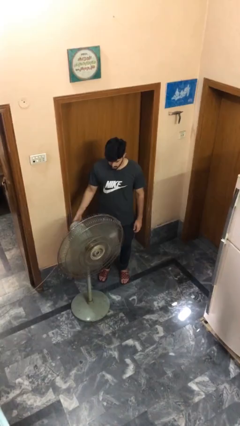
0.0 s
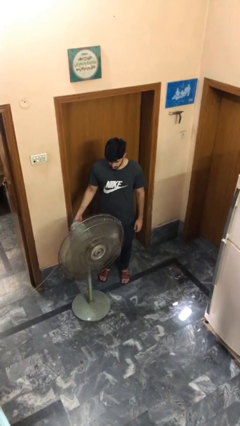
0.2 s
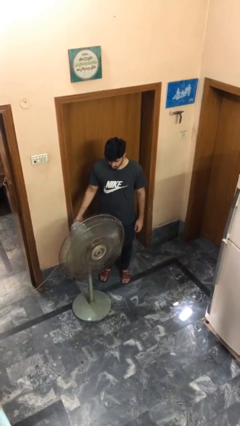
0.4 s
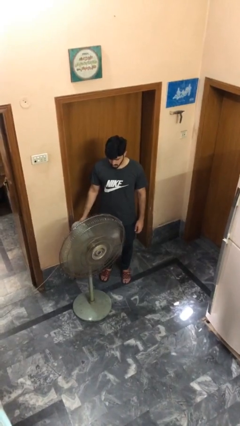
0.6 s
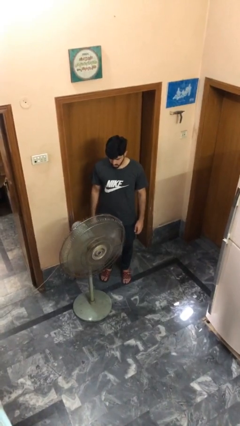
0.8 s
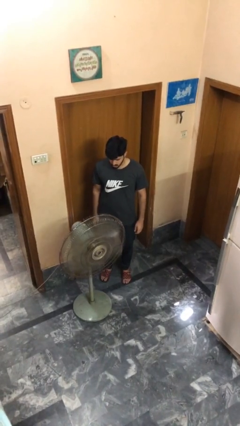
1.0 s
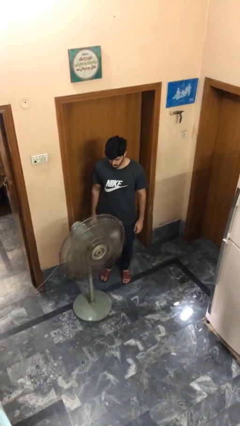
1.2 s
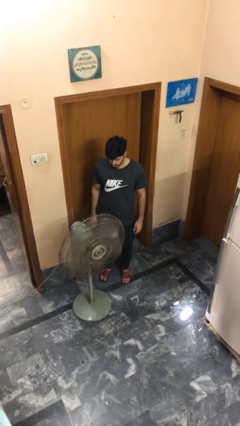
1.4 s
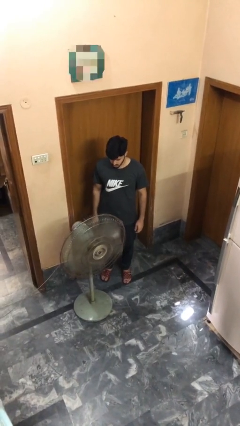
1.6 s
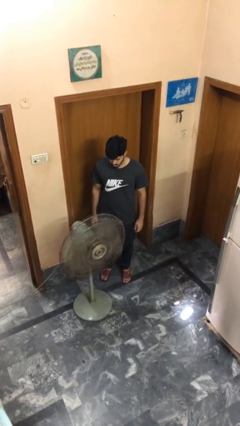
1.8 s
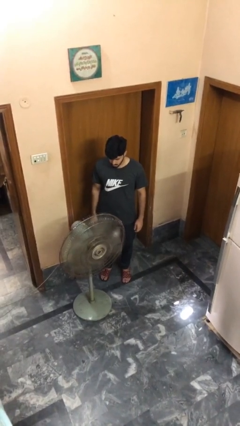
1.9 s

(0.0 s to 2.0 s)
person turns off fan

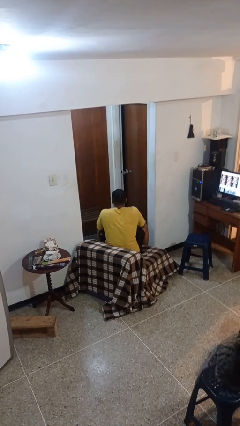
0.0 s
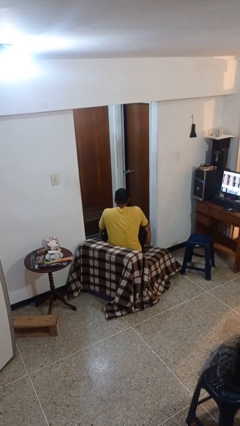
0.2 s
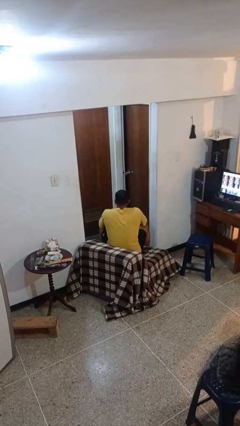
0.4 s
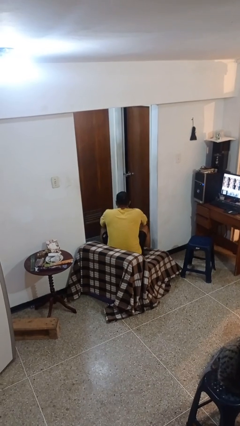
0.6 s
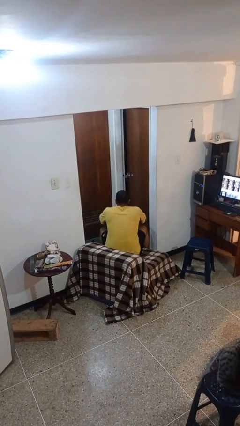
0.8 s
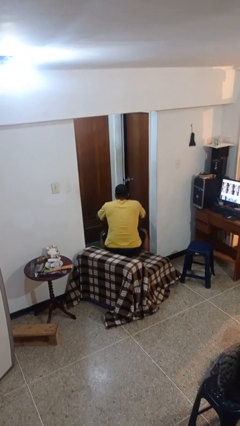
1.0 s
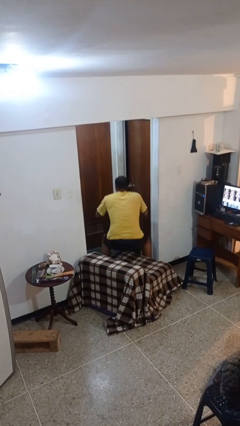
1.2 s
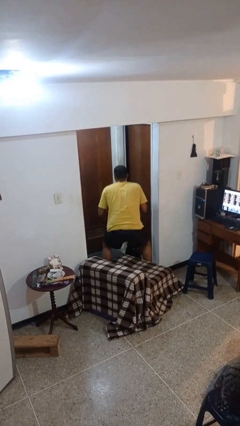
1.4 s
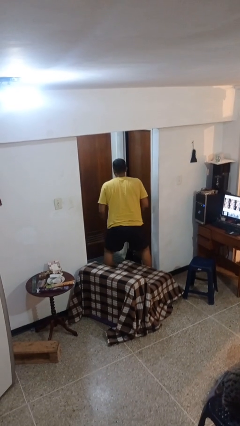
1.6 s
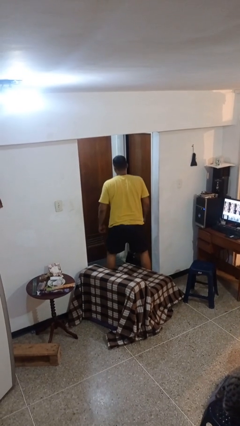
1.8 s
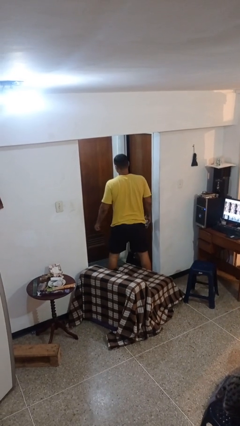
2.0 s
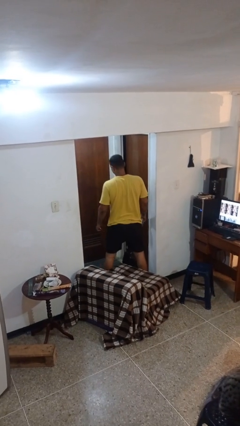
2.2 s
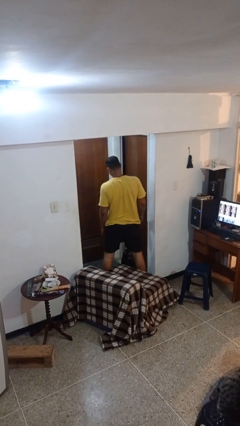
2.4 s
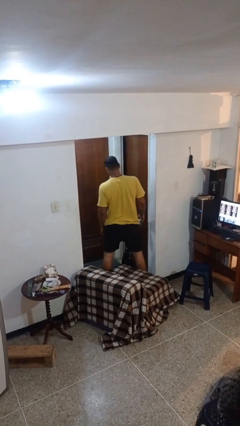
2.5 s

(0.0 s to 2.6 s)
person stands up

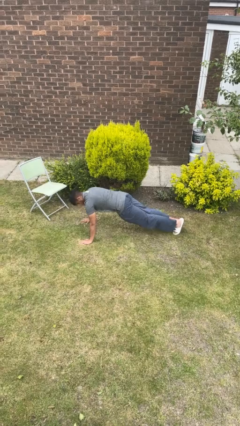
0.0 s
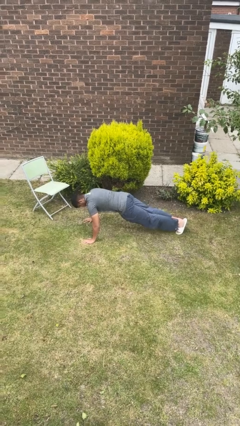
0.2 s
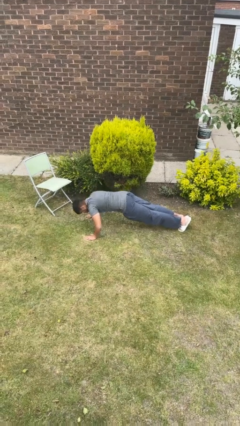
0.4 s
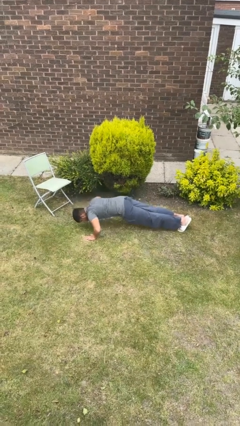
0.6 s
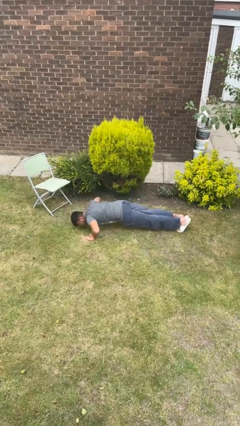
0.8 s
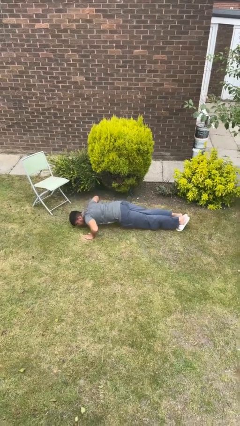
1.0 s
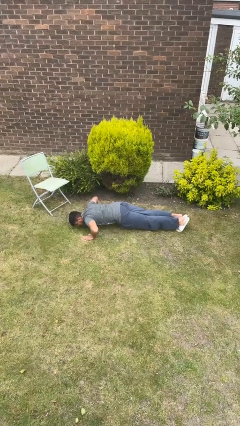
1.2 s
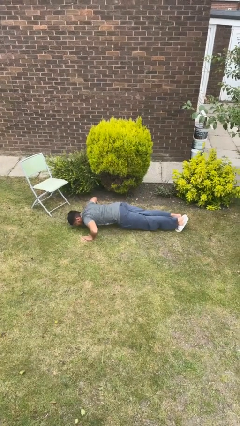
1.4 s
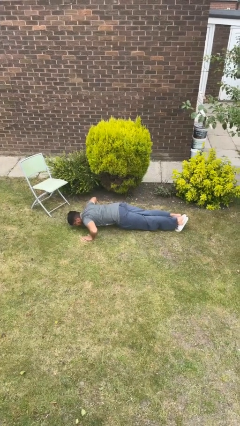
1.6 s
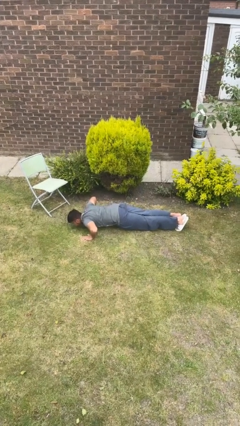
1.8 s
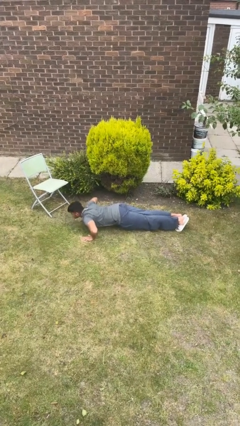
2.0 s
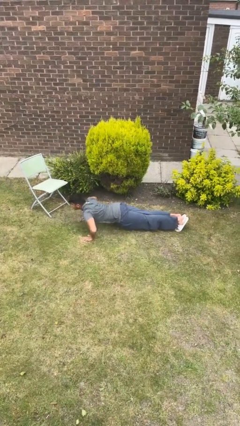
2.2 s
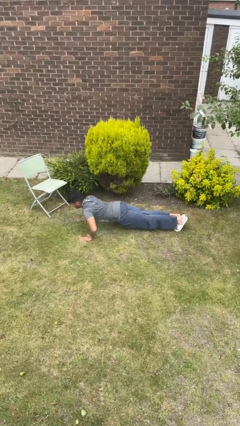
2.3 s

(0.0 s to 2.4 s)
person exercises with pushup

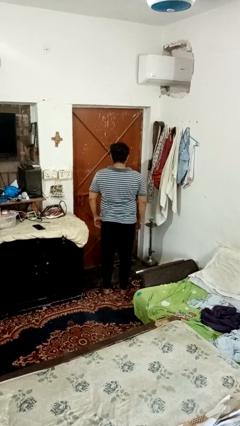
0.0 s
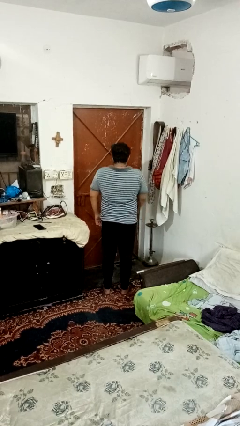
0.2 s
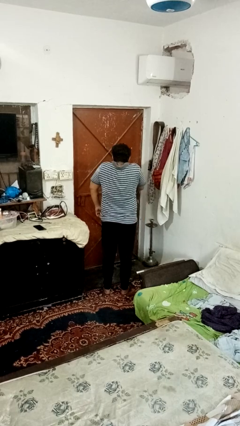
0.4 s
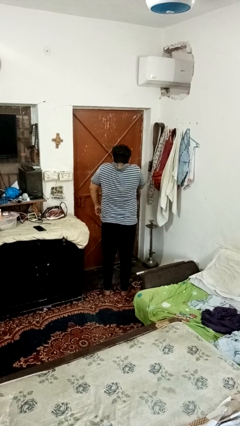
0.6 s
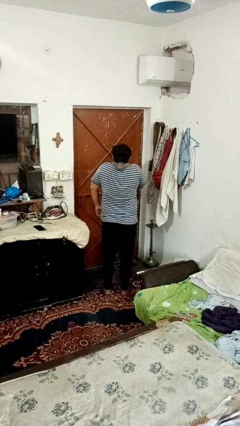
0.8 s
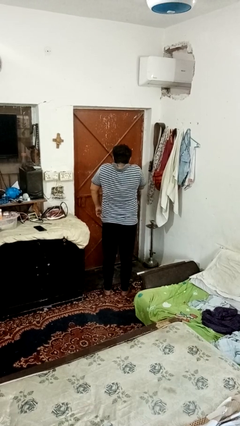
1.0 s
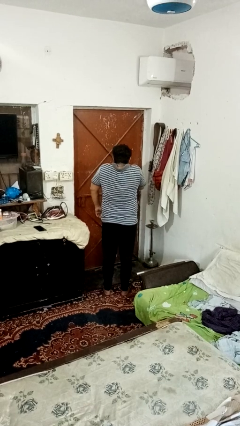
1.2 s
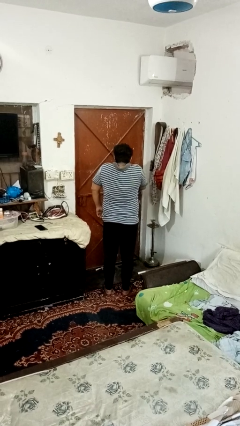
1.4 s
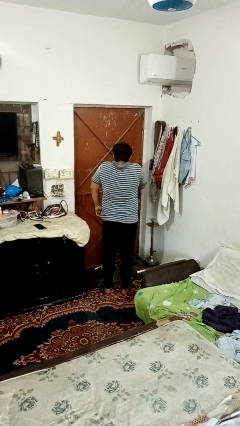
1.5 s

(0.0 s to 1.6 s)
person shrugs

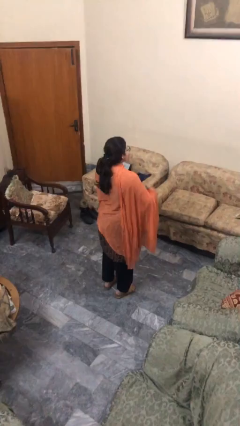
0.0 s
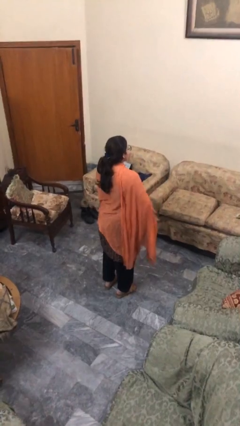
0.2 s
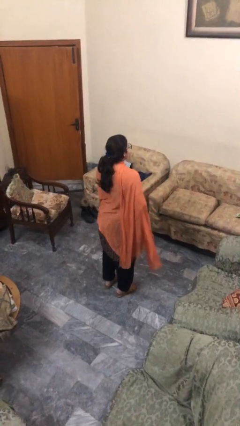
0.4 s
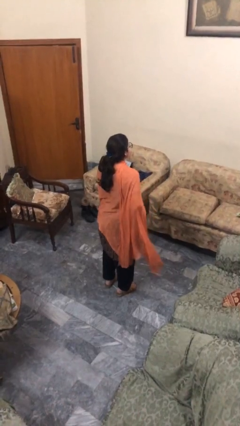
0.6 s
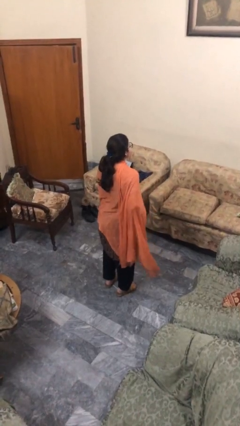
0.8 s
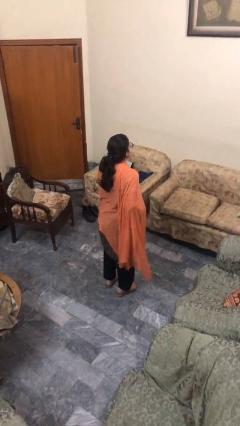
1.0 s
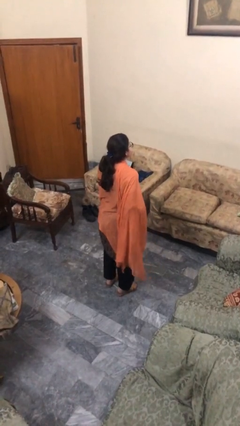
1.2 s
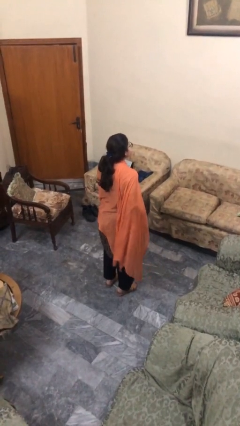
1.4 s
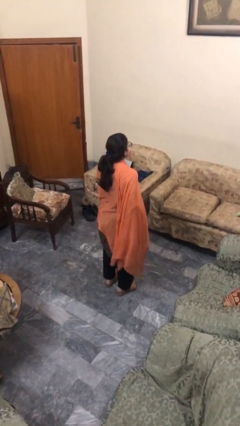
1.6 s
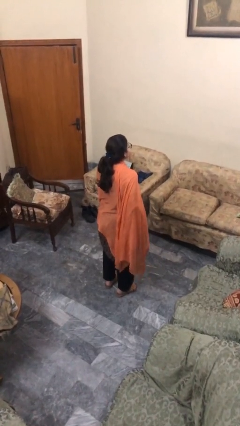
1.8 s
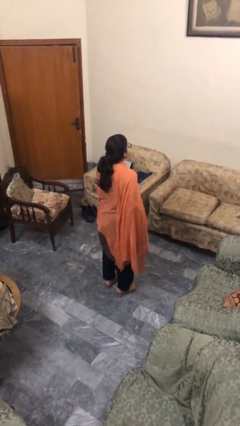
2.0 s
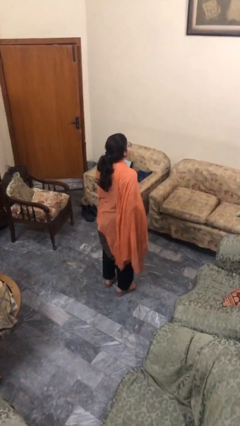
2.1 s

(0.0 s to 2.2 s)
person puts phone into pocket

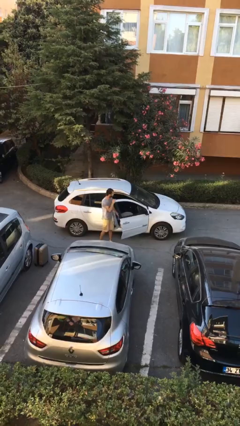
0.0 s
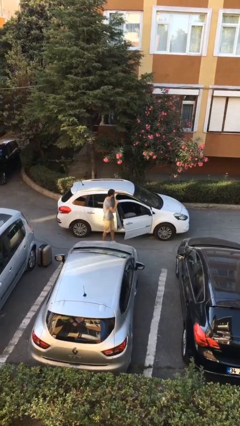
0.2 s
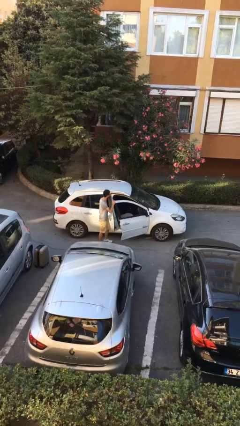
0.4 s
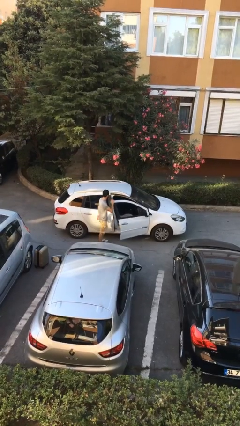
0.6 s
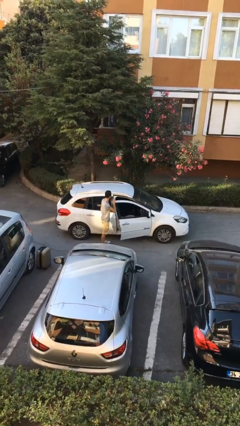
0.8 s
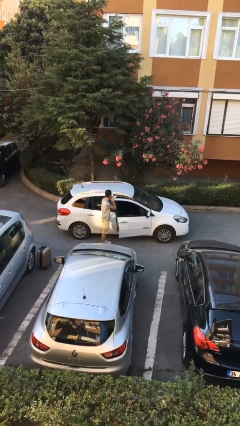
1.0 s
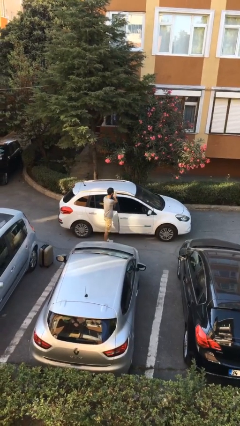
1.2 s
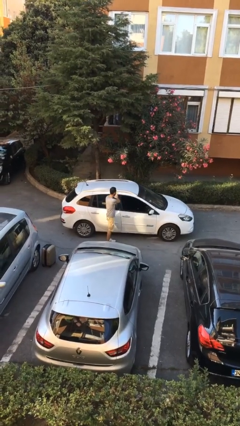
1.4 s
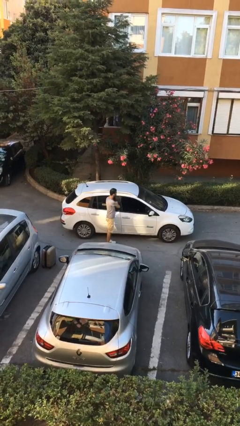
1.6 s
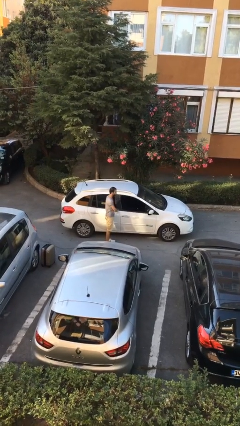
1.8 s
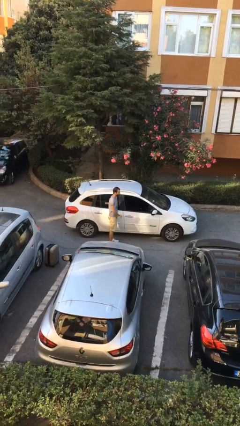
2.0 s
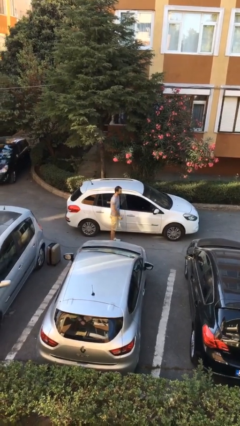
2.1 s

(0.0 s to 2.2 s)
person closes car door

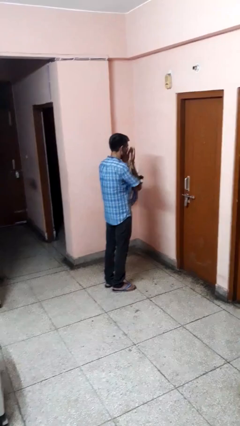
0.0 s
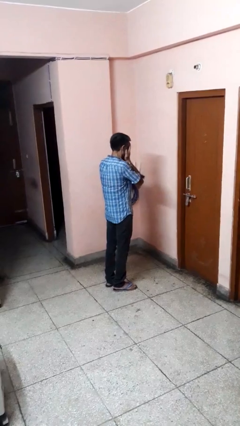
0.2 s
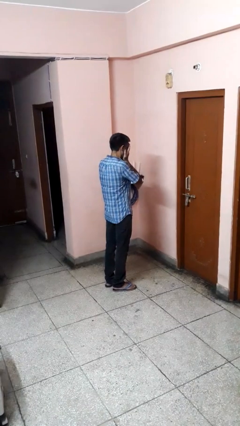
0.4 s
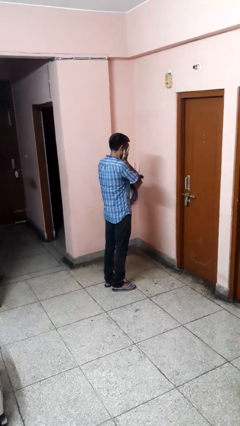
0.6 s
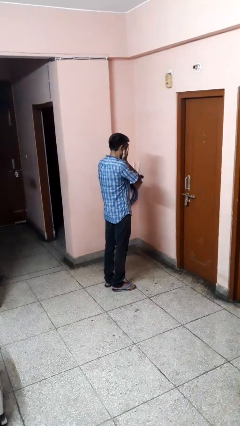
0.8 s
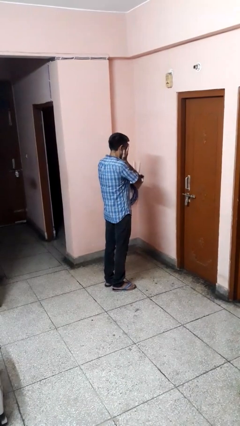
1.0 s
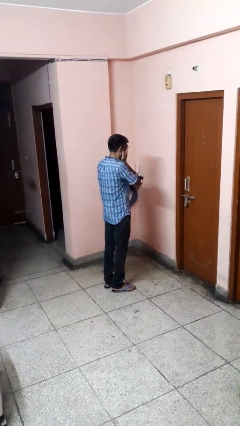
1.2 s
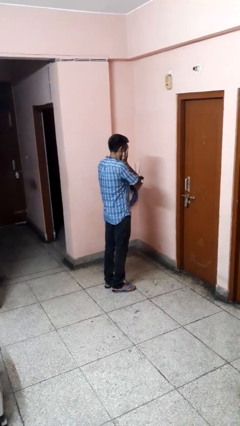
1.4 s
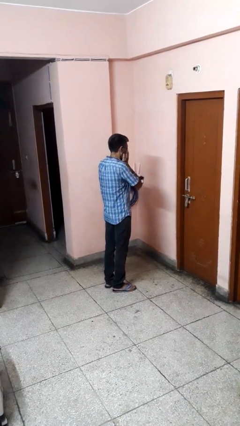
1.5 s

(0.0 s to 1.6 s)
person covers face with hands

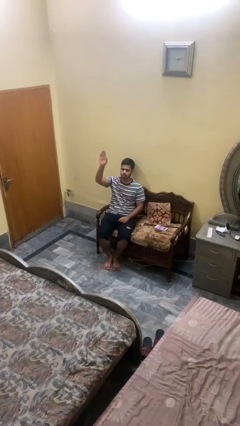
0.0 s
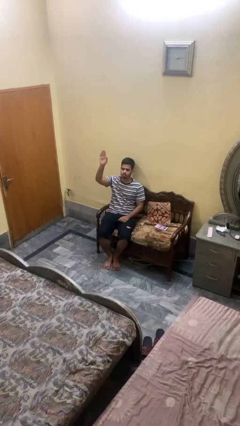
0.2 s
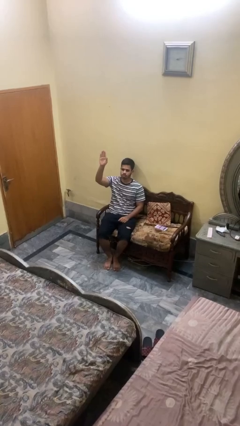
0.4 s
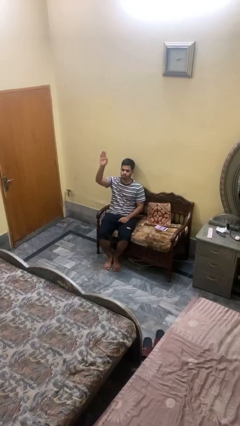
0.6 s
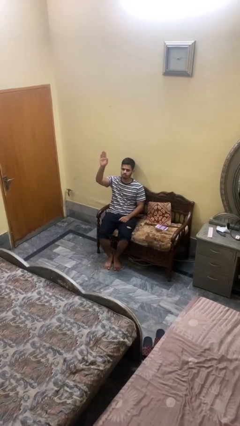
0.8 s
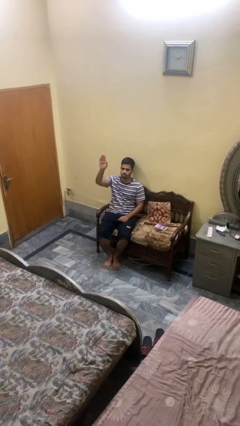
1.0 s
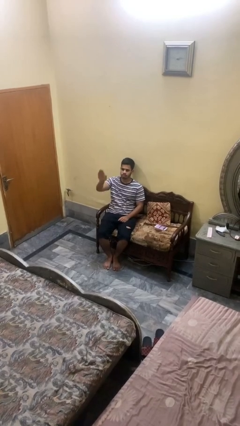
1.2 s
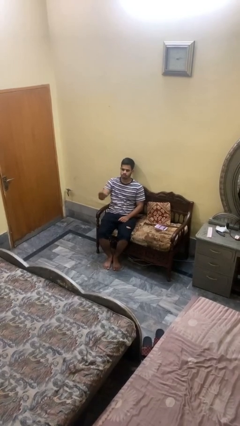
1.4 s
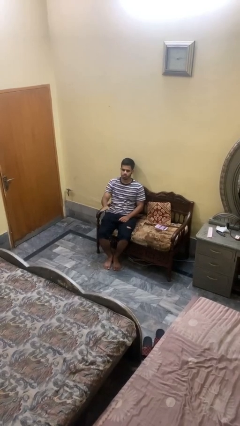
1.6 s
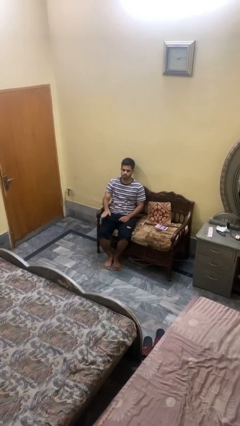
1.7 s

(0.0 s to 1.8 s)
person gestures lower hand
